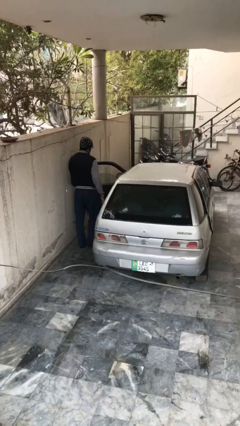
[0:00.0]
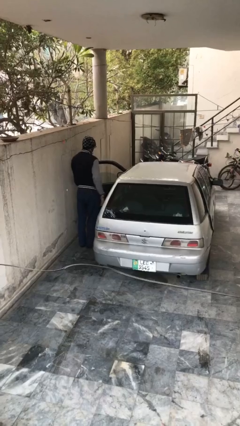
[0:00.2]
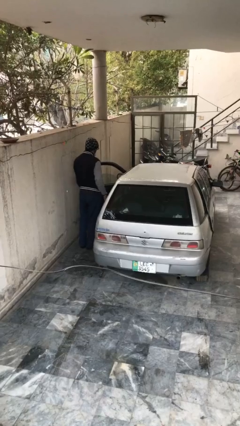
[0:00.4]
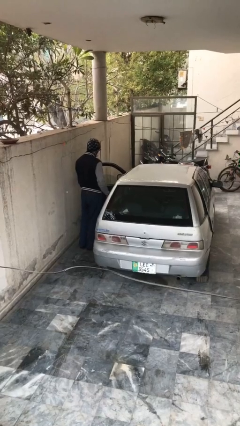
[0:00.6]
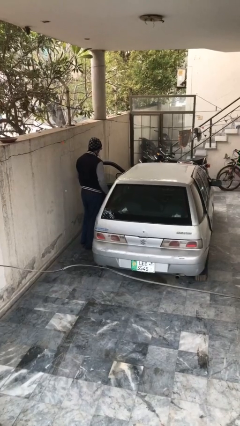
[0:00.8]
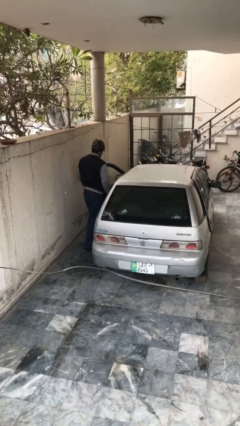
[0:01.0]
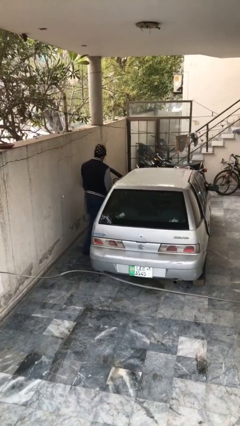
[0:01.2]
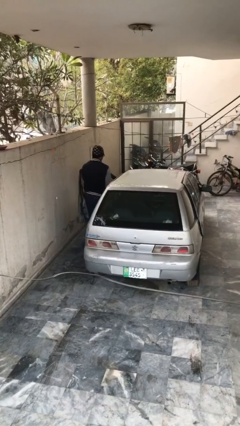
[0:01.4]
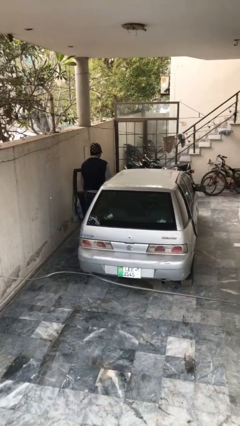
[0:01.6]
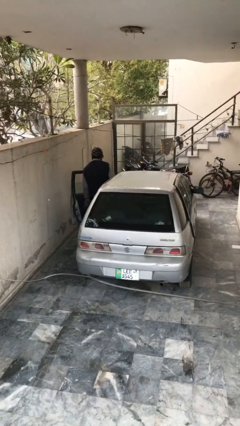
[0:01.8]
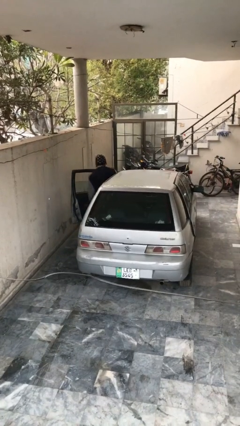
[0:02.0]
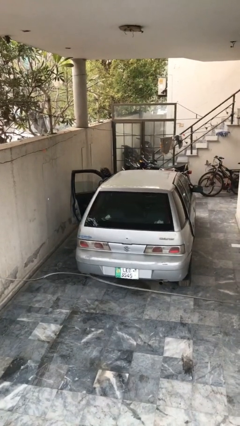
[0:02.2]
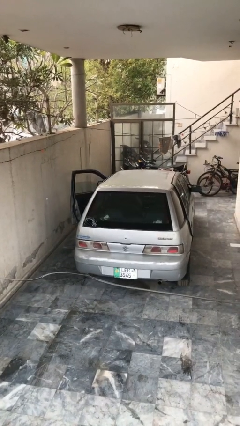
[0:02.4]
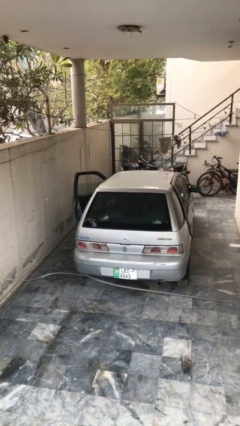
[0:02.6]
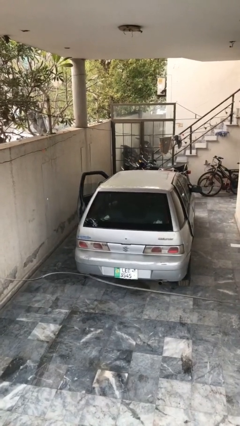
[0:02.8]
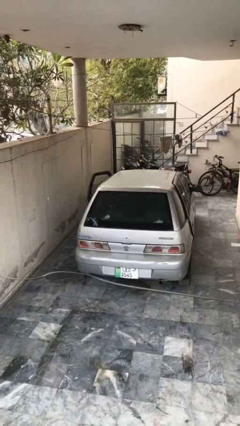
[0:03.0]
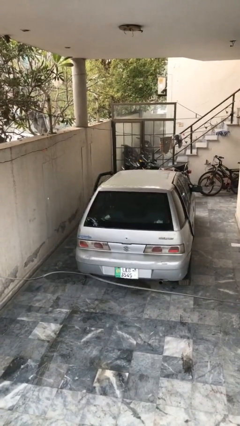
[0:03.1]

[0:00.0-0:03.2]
car picks up person

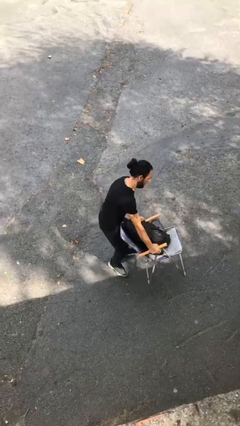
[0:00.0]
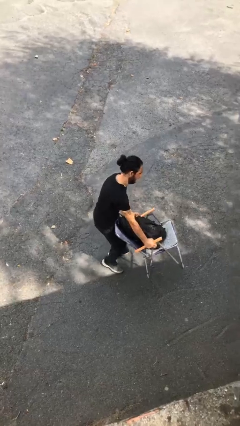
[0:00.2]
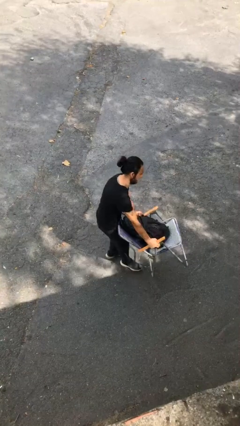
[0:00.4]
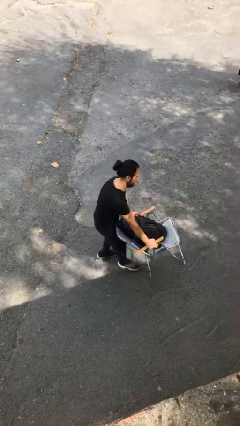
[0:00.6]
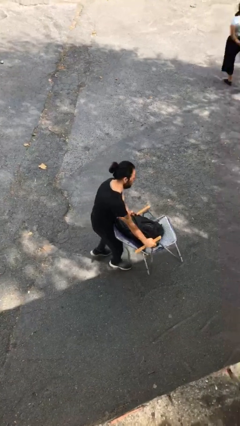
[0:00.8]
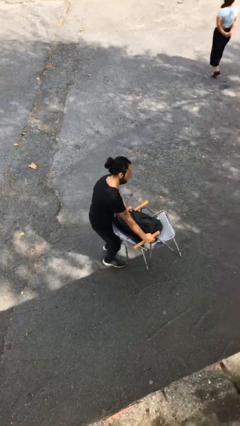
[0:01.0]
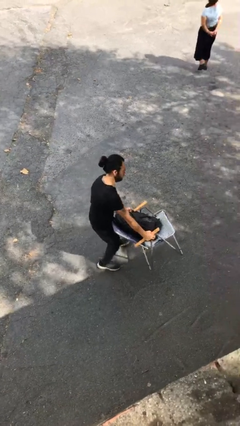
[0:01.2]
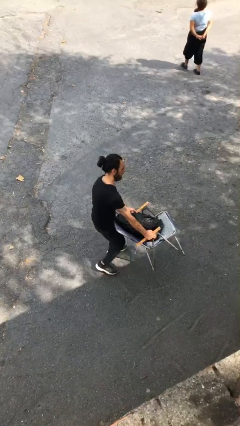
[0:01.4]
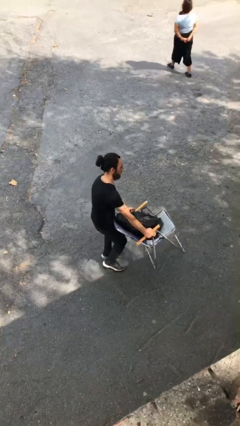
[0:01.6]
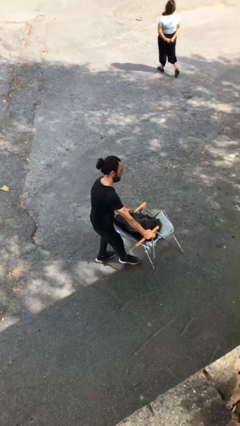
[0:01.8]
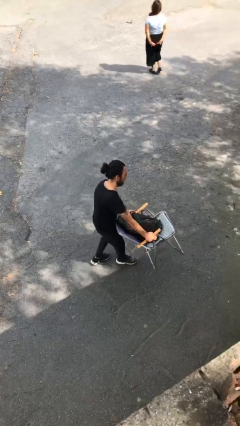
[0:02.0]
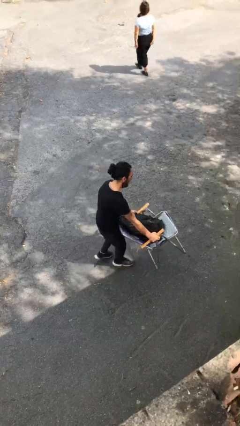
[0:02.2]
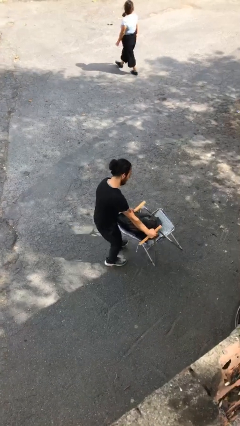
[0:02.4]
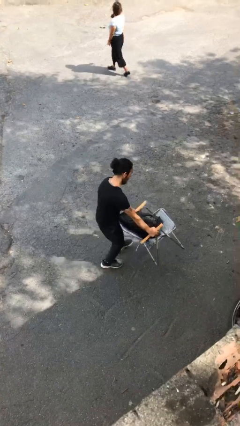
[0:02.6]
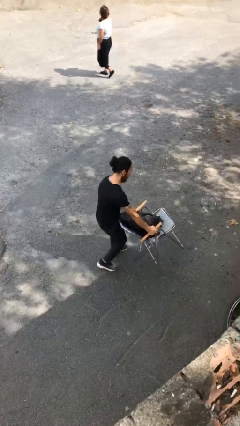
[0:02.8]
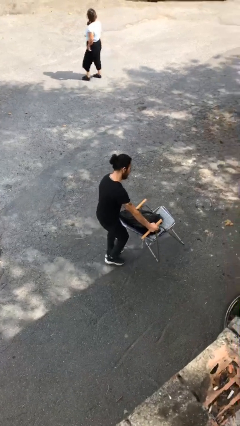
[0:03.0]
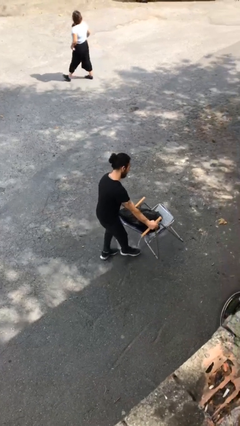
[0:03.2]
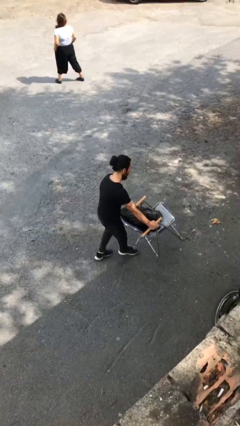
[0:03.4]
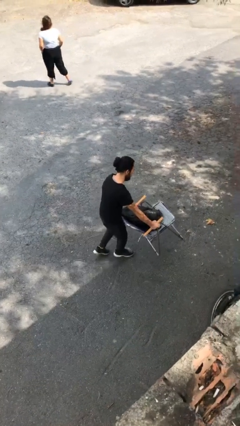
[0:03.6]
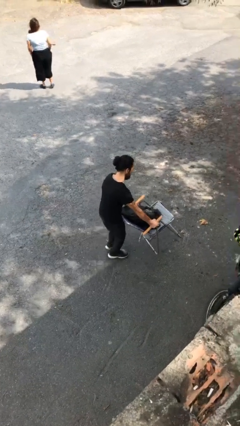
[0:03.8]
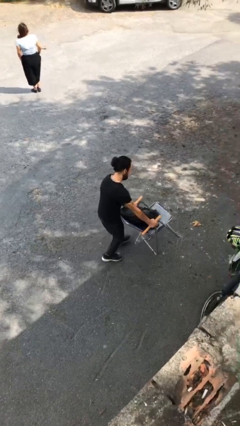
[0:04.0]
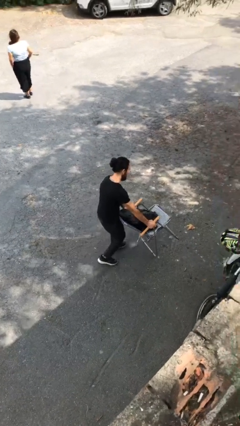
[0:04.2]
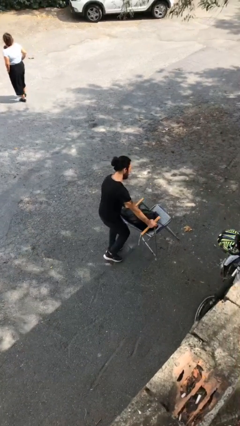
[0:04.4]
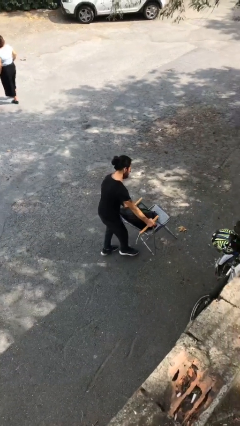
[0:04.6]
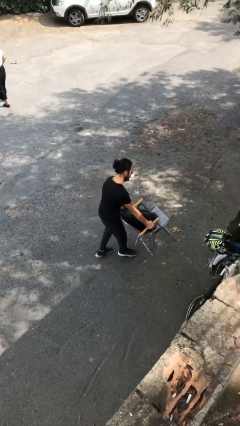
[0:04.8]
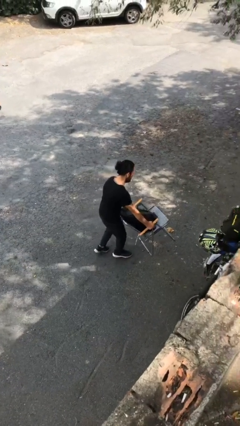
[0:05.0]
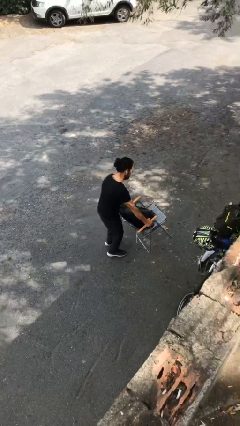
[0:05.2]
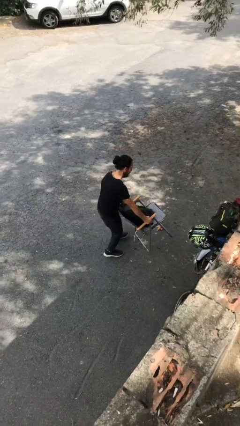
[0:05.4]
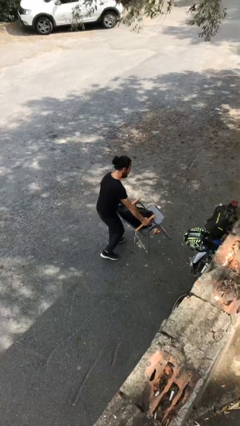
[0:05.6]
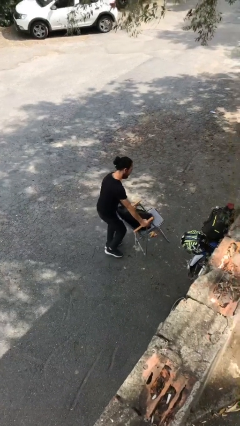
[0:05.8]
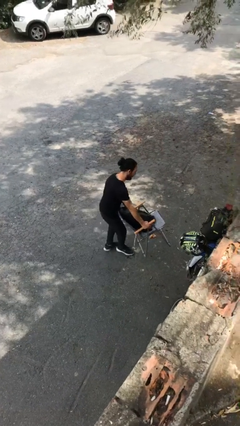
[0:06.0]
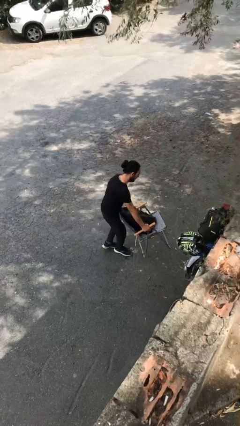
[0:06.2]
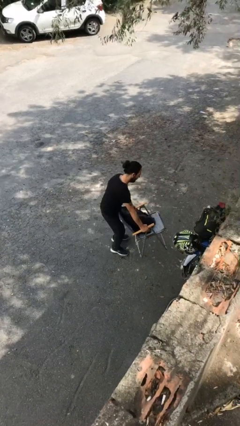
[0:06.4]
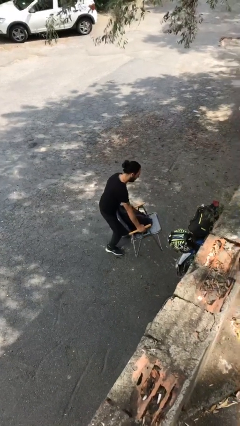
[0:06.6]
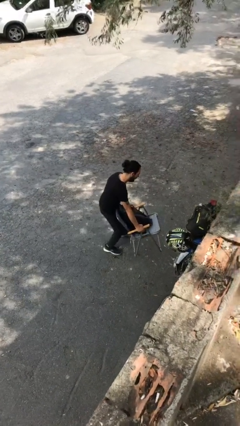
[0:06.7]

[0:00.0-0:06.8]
person carries heavy object

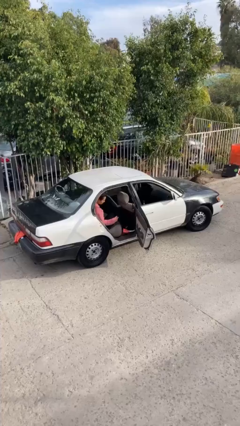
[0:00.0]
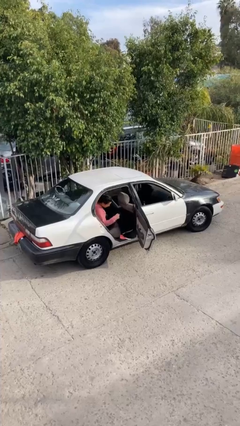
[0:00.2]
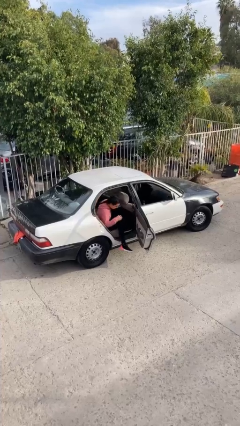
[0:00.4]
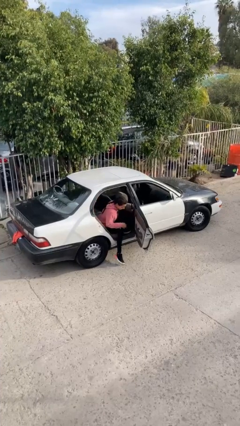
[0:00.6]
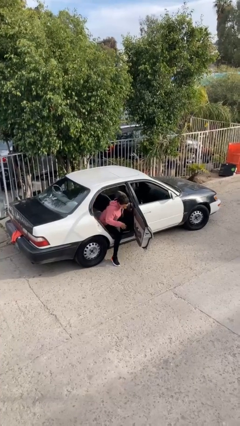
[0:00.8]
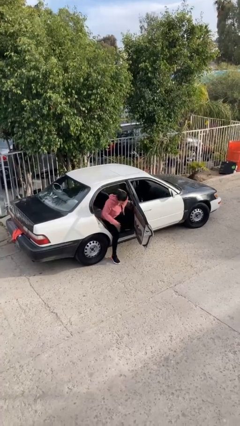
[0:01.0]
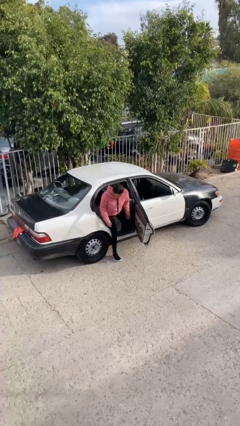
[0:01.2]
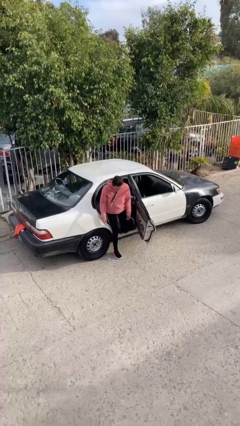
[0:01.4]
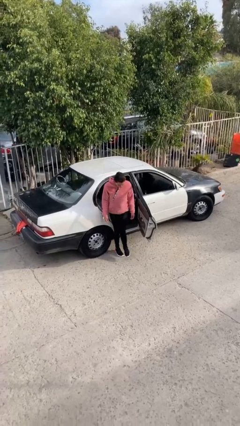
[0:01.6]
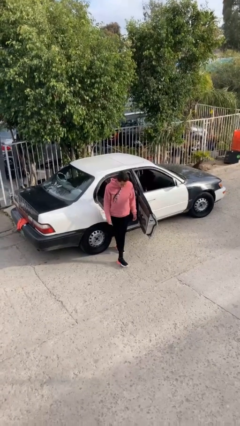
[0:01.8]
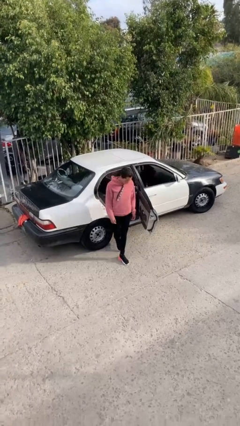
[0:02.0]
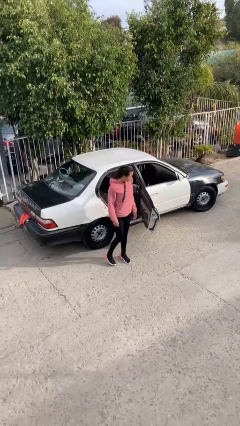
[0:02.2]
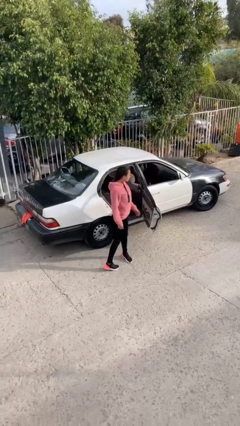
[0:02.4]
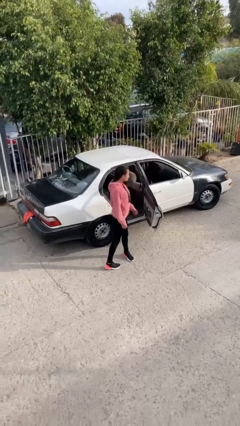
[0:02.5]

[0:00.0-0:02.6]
person exits car

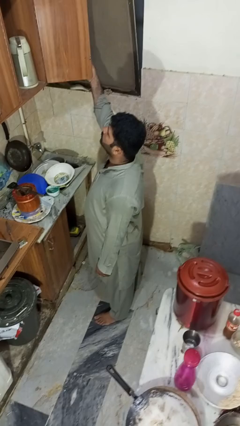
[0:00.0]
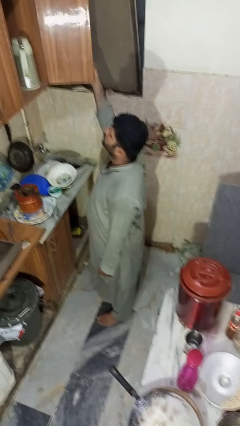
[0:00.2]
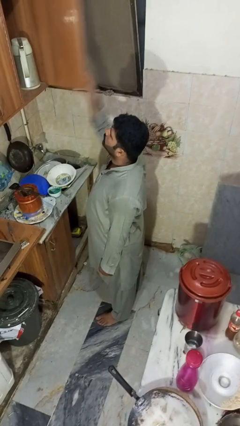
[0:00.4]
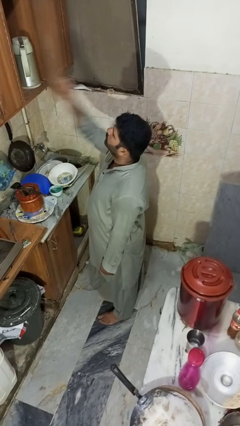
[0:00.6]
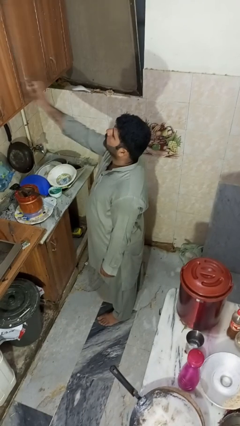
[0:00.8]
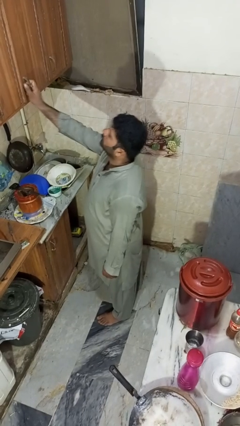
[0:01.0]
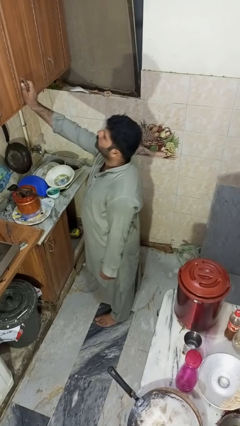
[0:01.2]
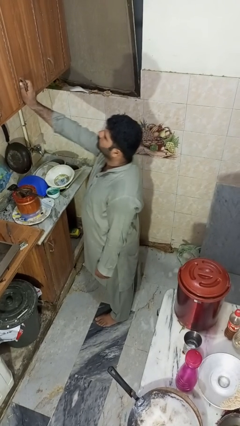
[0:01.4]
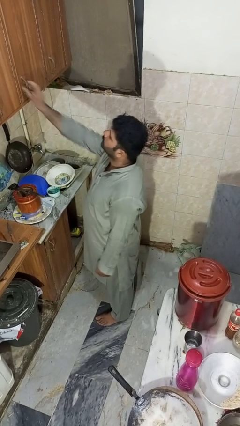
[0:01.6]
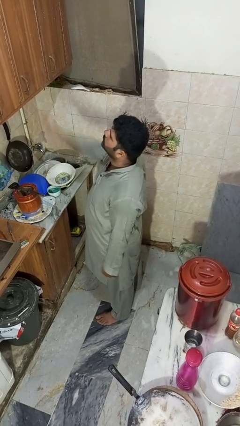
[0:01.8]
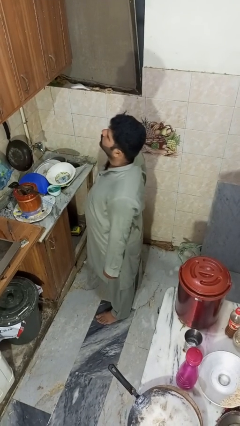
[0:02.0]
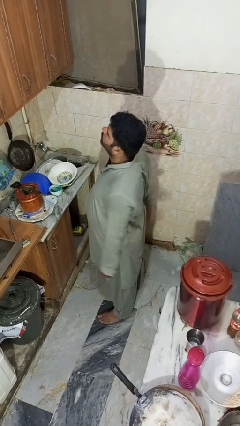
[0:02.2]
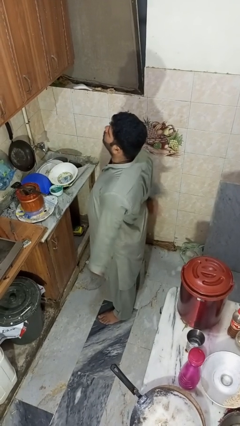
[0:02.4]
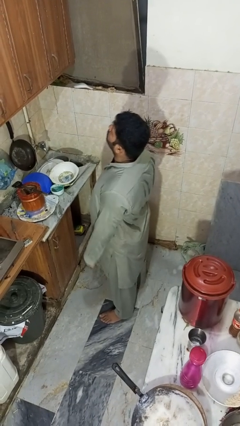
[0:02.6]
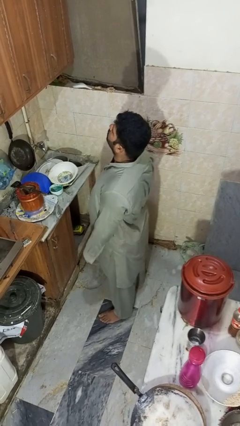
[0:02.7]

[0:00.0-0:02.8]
person closes cabinet

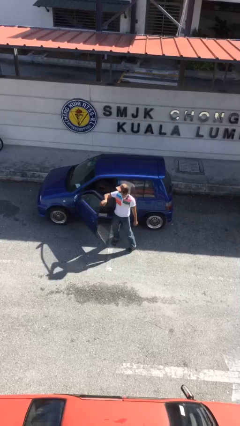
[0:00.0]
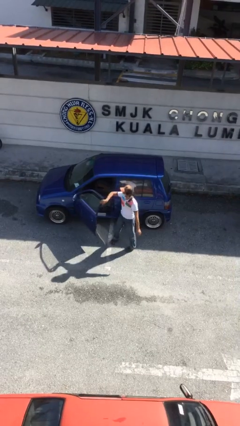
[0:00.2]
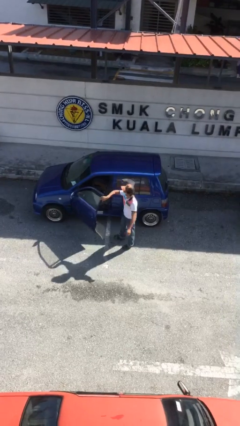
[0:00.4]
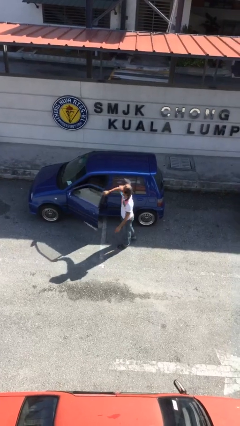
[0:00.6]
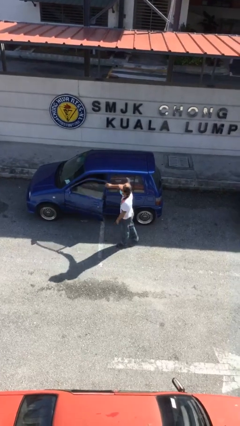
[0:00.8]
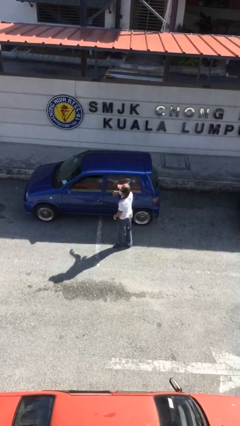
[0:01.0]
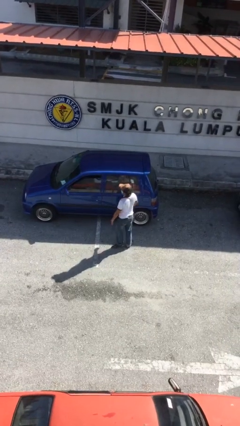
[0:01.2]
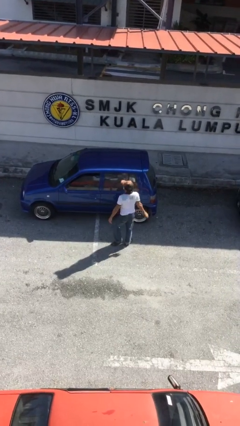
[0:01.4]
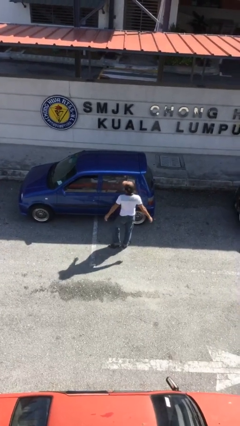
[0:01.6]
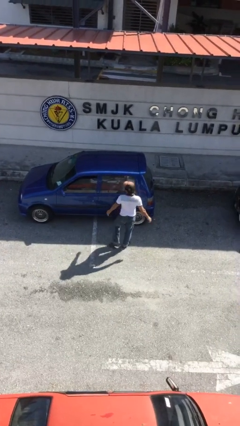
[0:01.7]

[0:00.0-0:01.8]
person closes car door

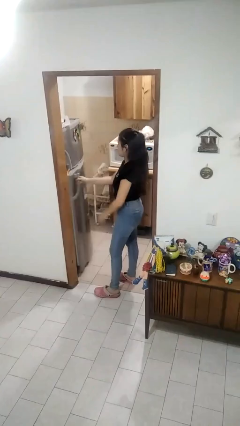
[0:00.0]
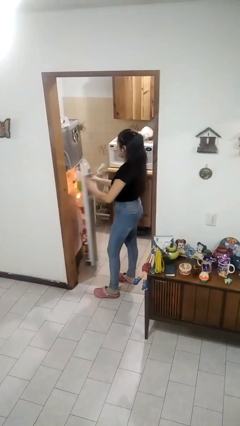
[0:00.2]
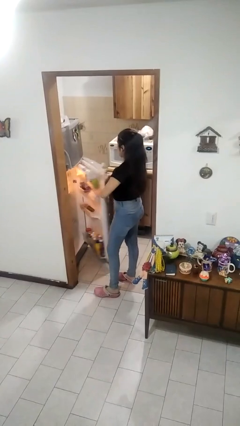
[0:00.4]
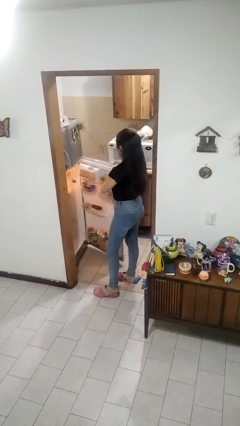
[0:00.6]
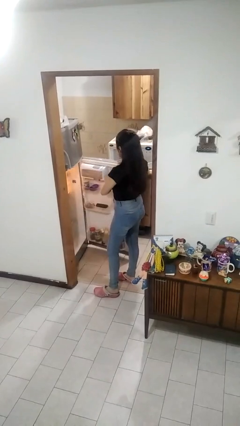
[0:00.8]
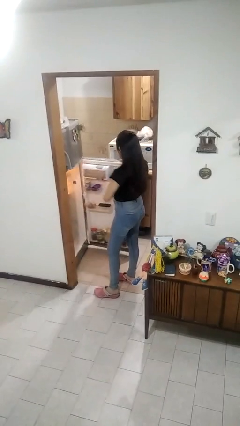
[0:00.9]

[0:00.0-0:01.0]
person opens refrigerator
